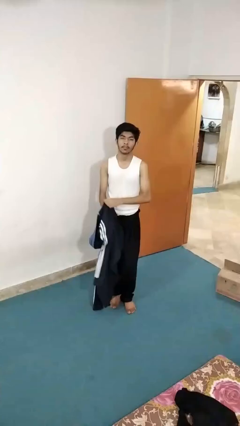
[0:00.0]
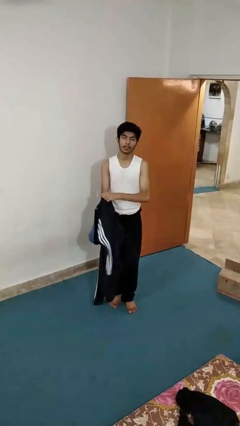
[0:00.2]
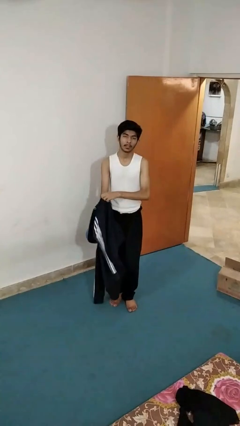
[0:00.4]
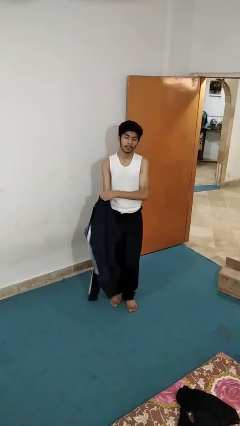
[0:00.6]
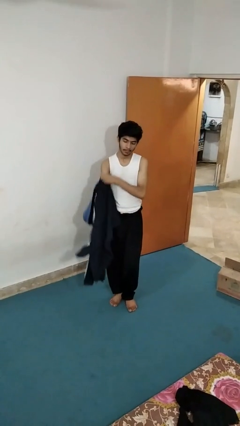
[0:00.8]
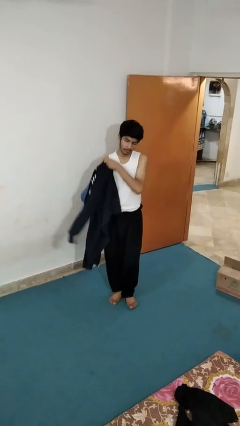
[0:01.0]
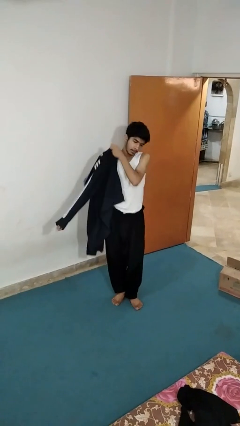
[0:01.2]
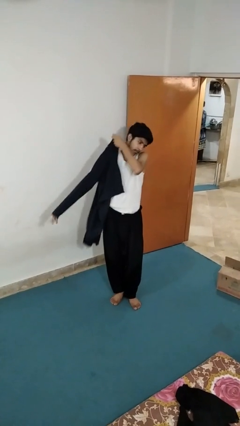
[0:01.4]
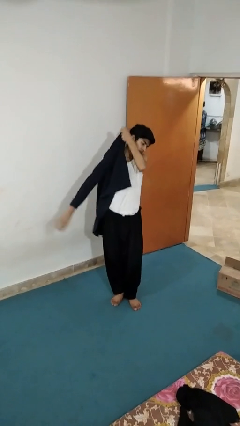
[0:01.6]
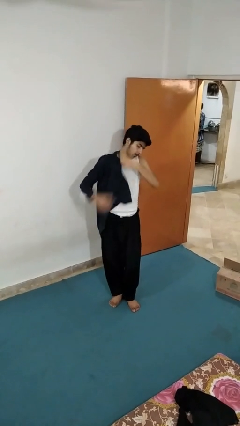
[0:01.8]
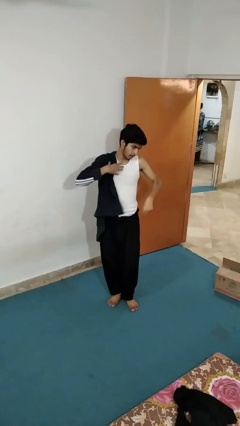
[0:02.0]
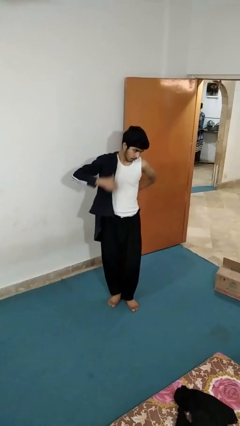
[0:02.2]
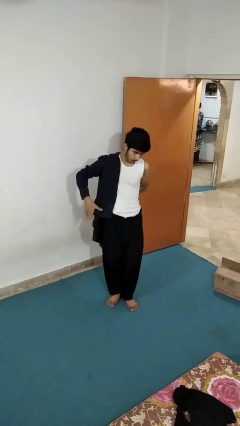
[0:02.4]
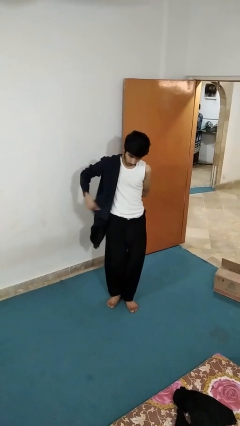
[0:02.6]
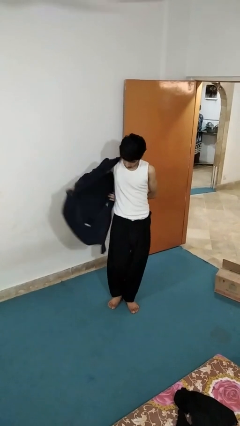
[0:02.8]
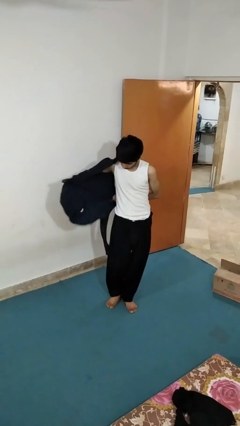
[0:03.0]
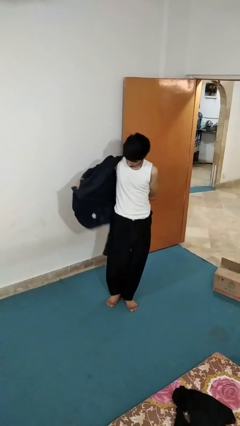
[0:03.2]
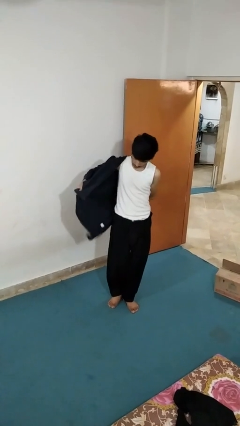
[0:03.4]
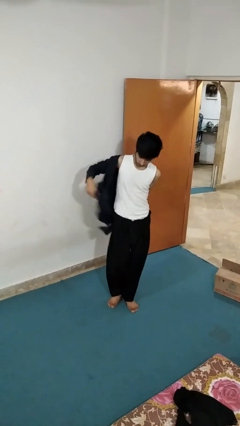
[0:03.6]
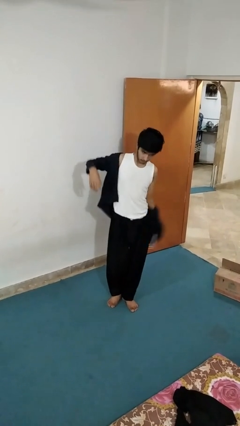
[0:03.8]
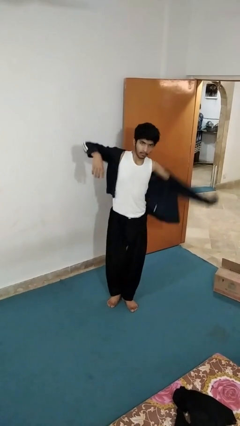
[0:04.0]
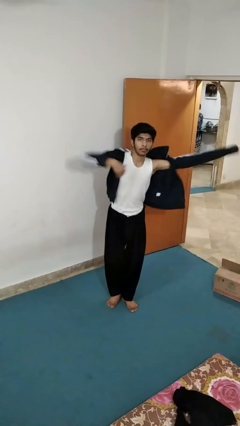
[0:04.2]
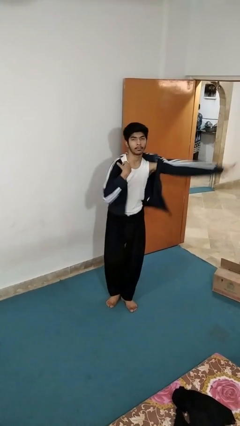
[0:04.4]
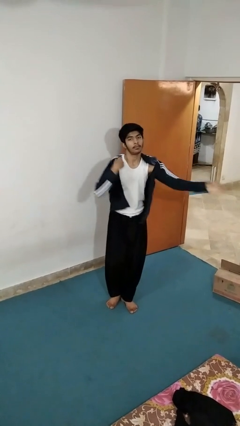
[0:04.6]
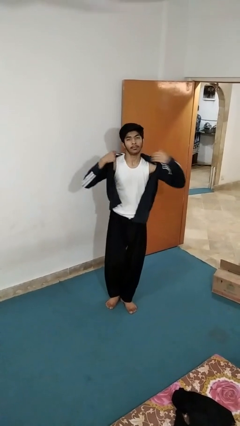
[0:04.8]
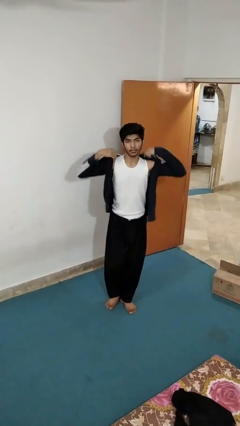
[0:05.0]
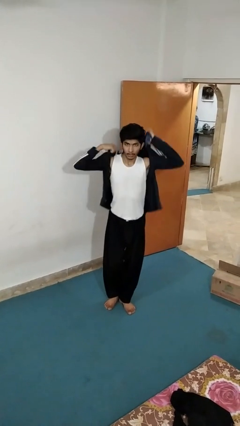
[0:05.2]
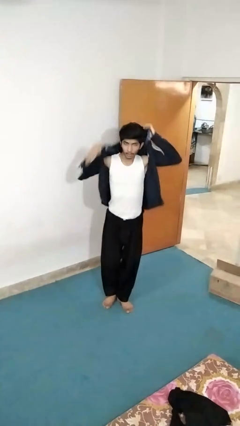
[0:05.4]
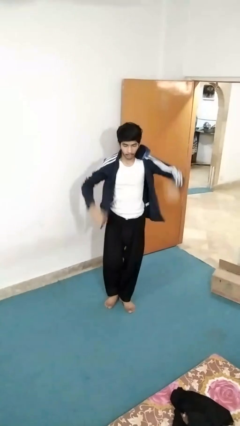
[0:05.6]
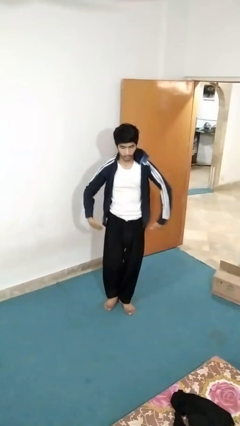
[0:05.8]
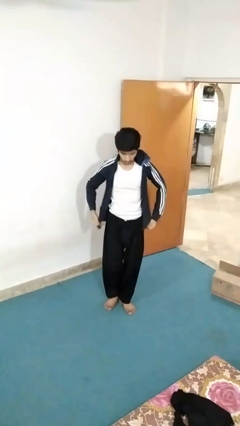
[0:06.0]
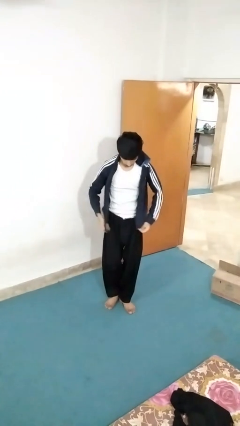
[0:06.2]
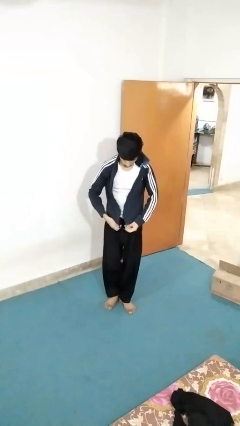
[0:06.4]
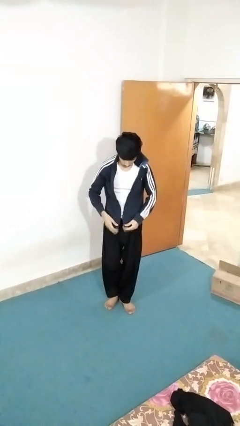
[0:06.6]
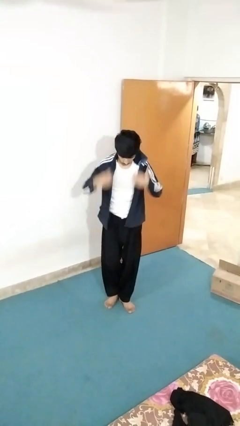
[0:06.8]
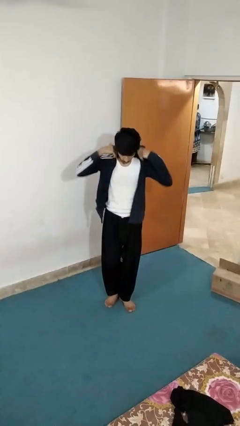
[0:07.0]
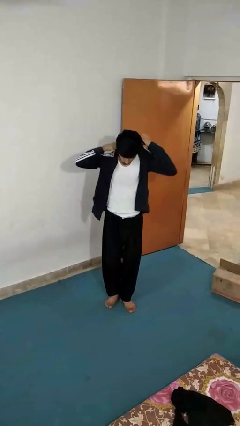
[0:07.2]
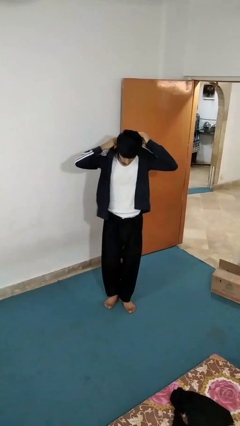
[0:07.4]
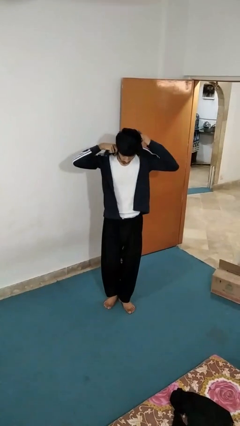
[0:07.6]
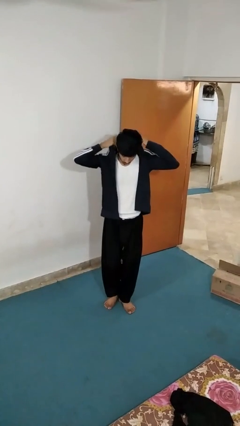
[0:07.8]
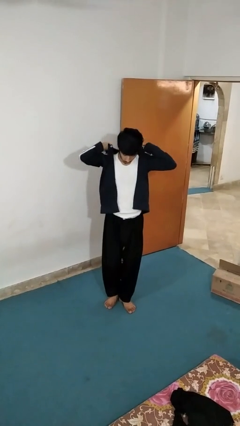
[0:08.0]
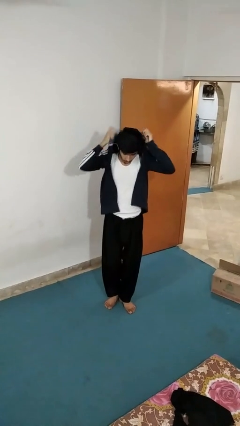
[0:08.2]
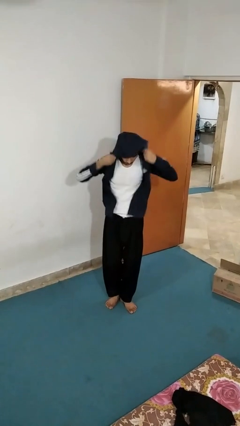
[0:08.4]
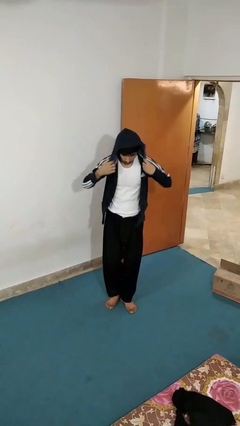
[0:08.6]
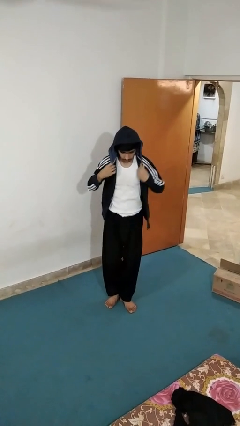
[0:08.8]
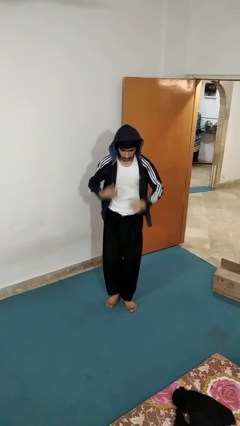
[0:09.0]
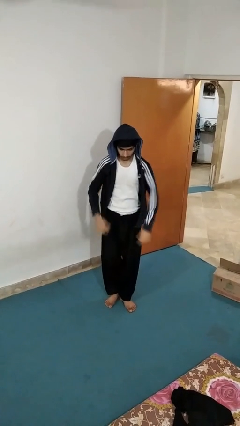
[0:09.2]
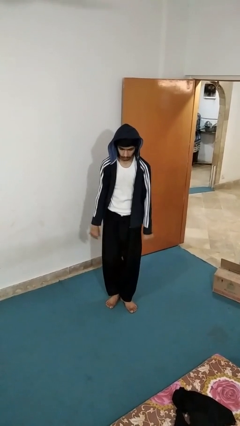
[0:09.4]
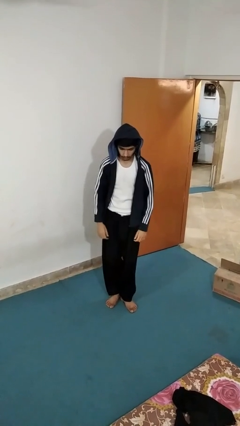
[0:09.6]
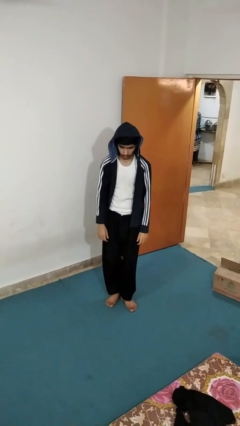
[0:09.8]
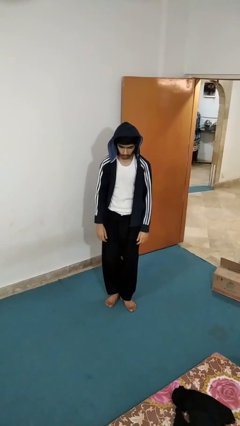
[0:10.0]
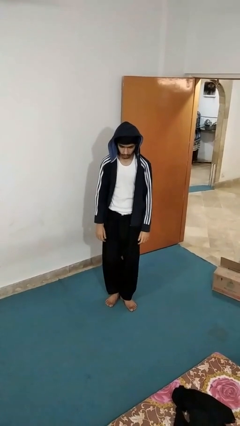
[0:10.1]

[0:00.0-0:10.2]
person puts on hoodie

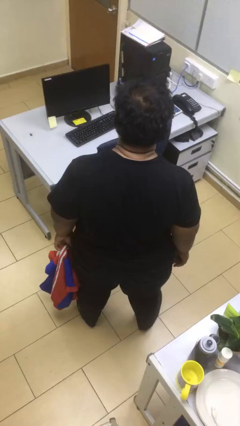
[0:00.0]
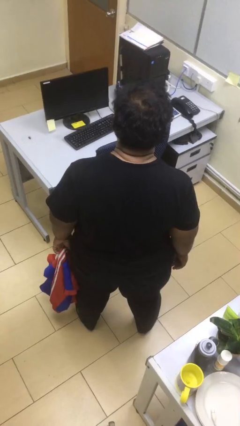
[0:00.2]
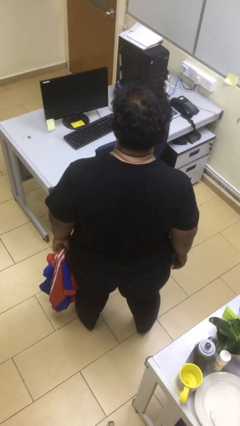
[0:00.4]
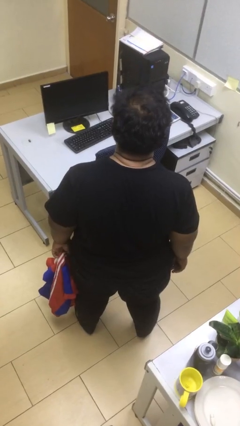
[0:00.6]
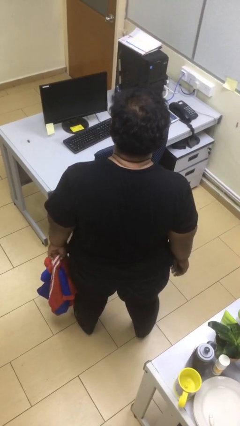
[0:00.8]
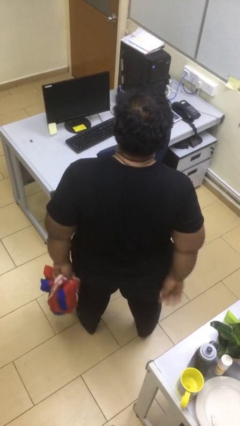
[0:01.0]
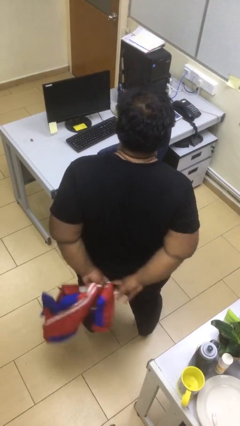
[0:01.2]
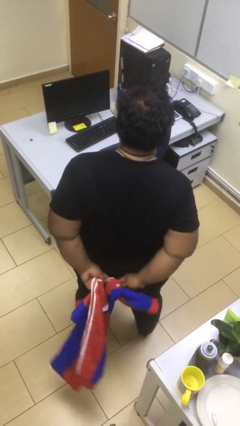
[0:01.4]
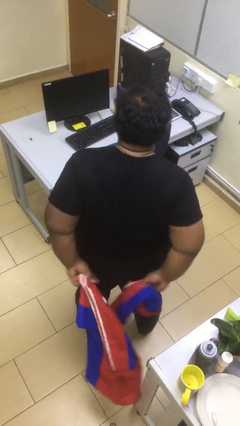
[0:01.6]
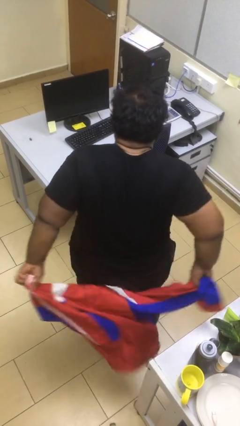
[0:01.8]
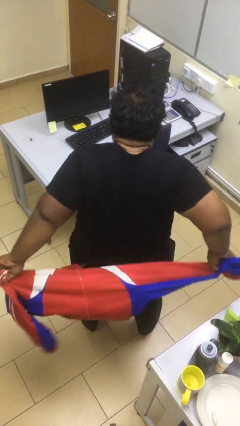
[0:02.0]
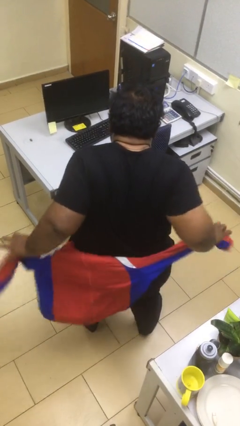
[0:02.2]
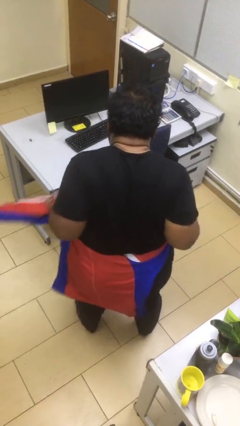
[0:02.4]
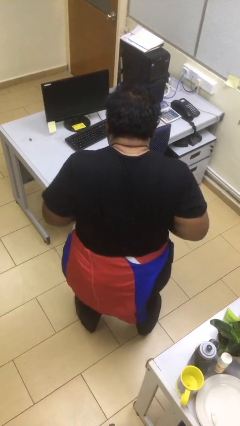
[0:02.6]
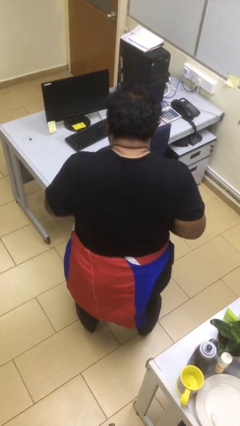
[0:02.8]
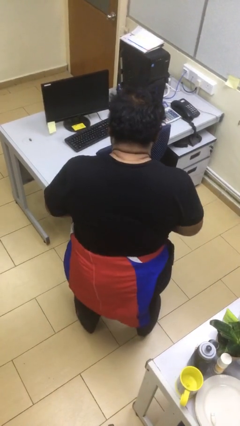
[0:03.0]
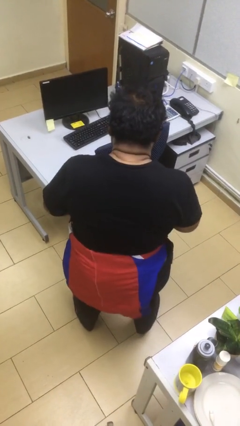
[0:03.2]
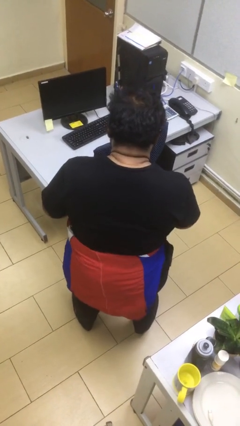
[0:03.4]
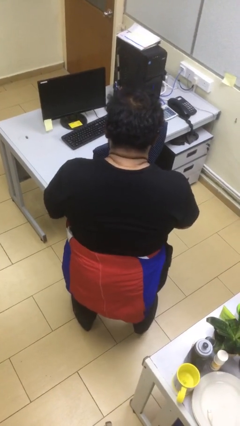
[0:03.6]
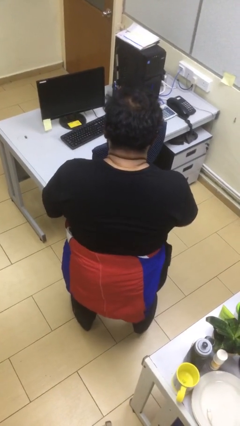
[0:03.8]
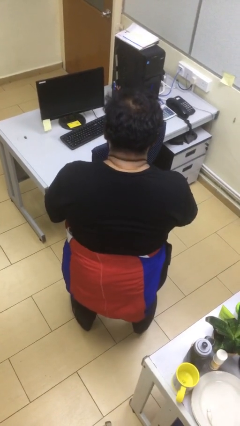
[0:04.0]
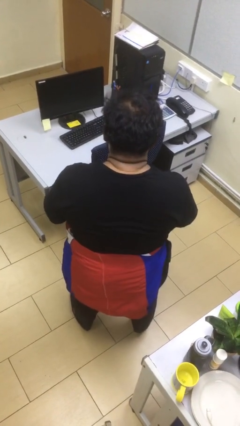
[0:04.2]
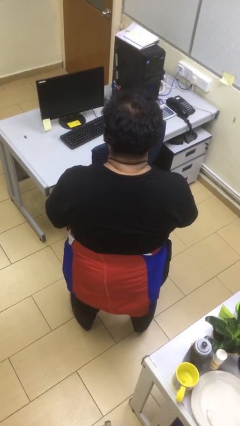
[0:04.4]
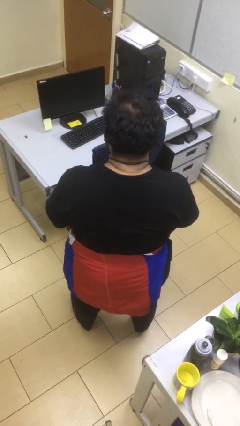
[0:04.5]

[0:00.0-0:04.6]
person ties jacket around waist

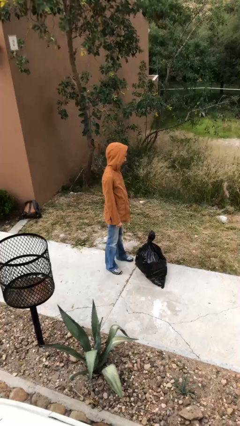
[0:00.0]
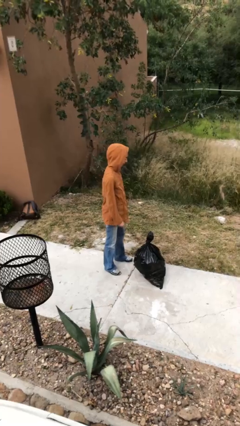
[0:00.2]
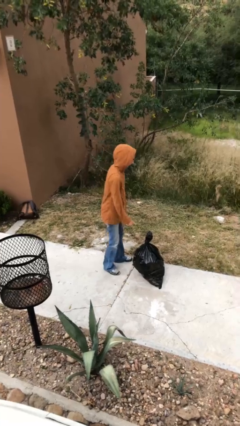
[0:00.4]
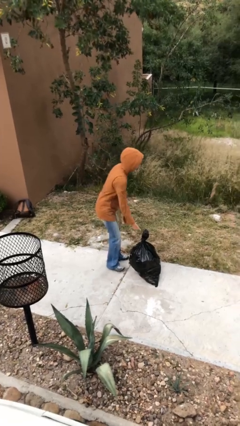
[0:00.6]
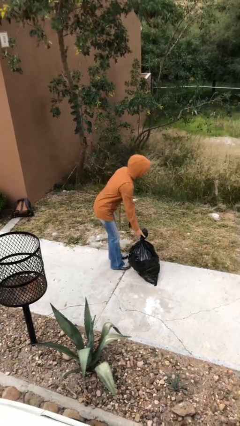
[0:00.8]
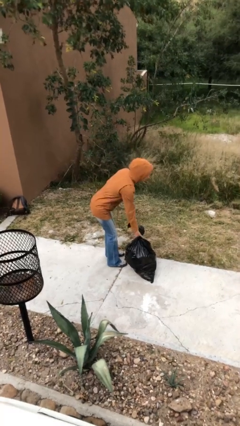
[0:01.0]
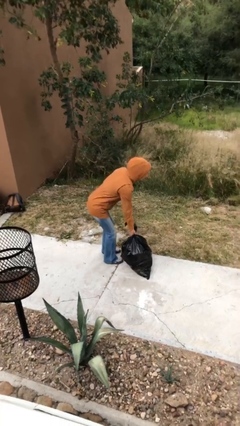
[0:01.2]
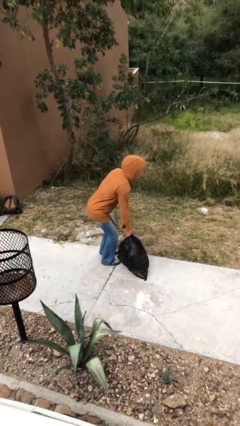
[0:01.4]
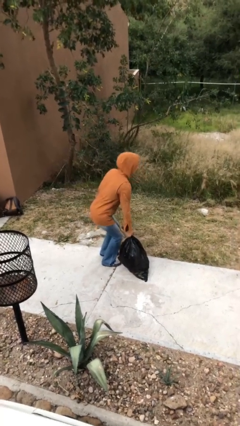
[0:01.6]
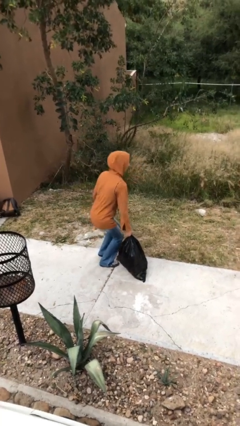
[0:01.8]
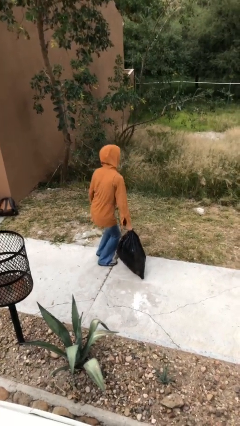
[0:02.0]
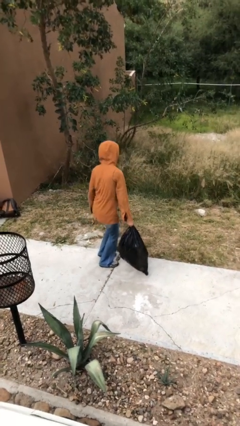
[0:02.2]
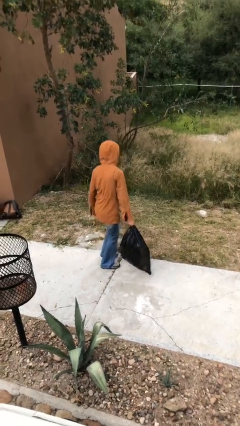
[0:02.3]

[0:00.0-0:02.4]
person picks up object from floor

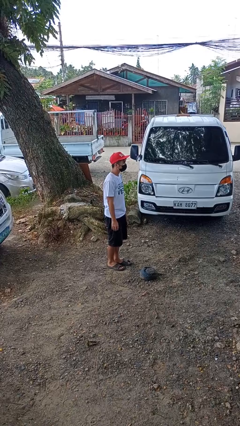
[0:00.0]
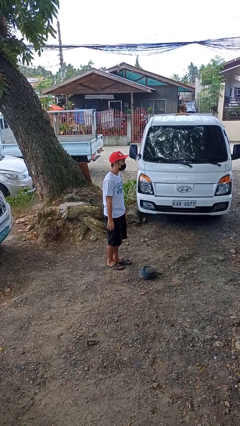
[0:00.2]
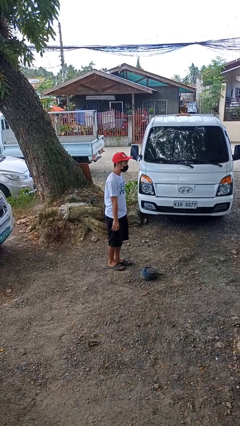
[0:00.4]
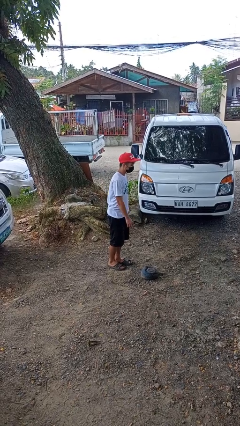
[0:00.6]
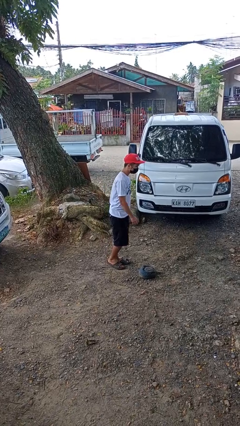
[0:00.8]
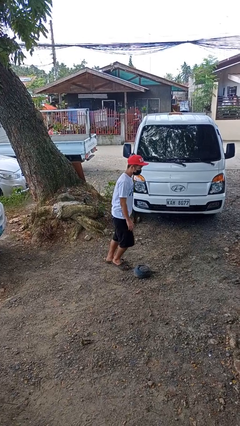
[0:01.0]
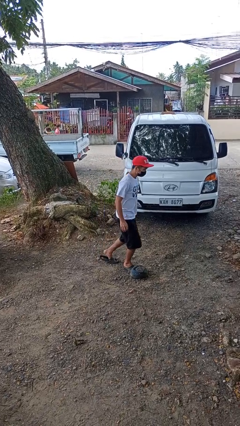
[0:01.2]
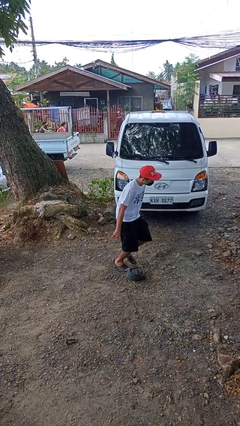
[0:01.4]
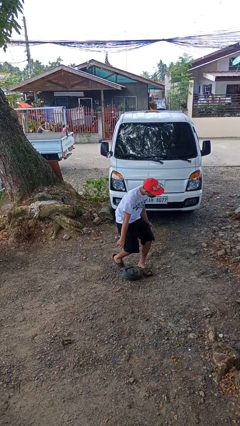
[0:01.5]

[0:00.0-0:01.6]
person trips on object on floor
